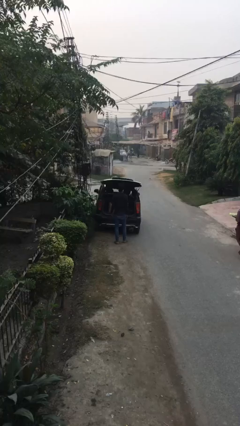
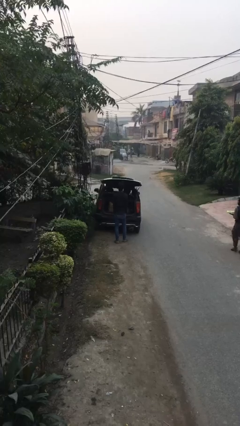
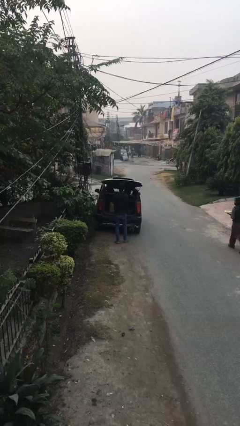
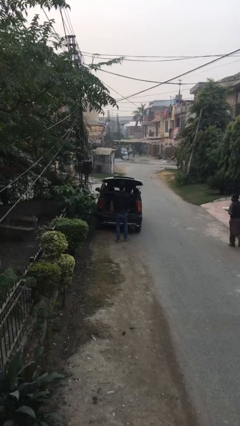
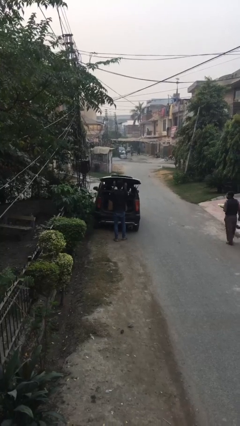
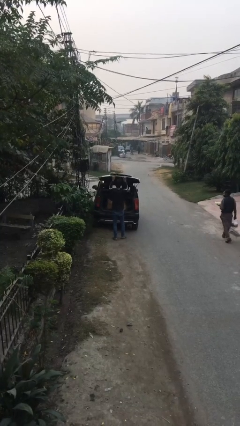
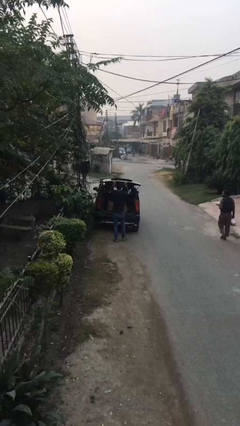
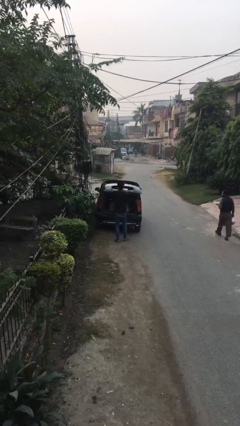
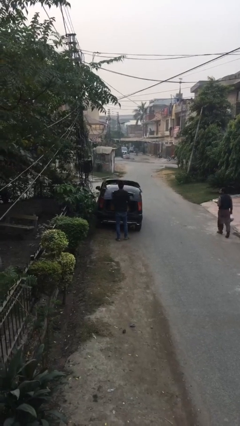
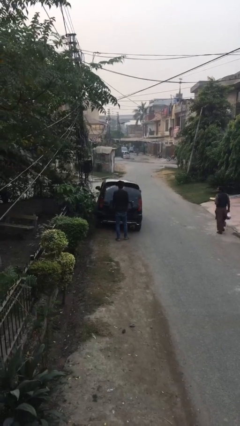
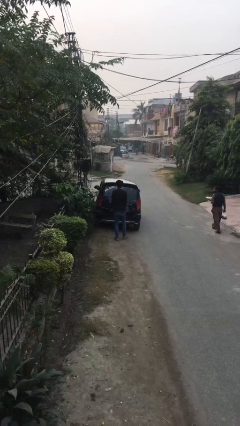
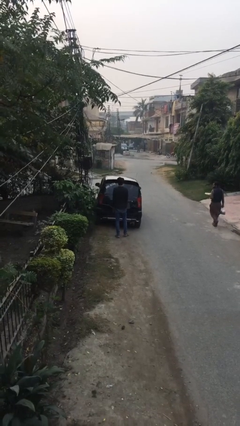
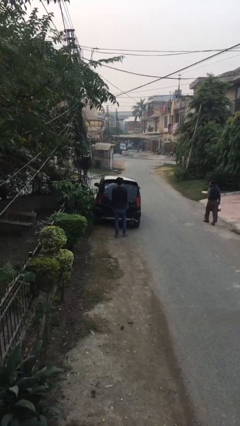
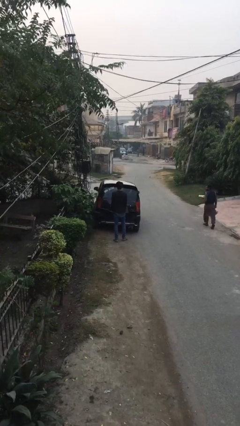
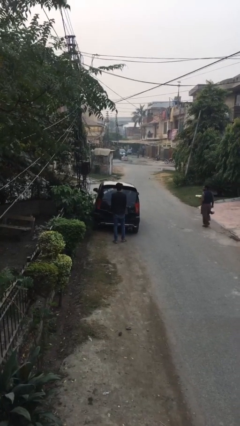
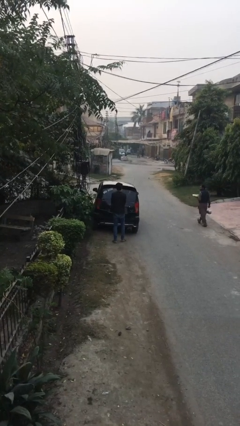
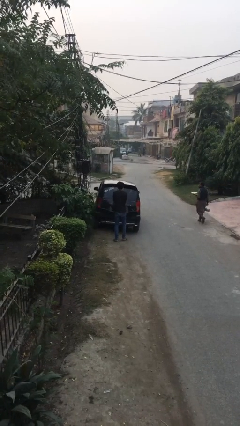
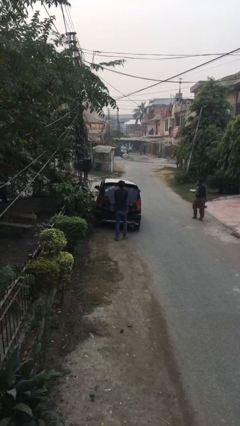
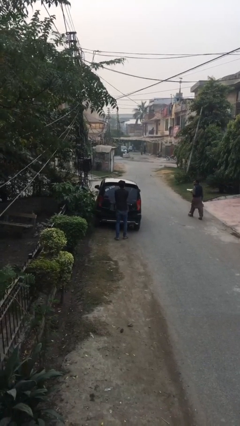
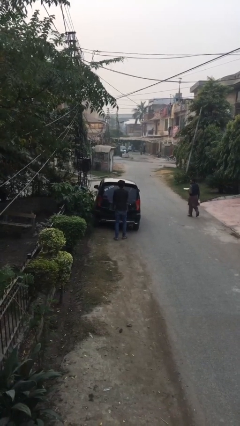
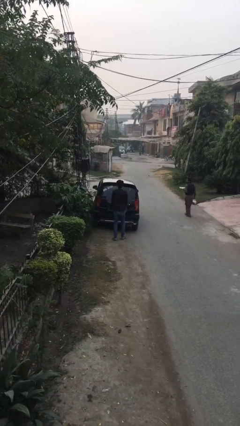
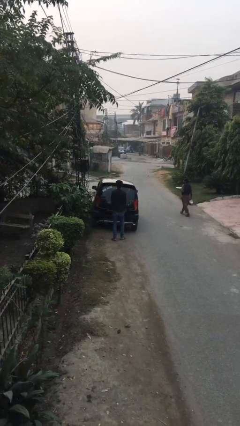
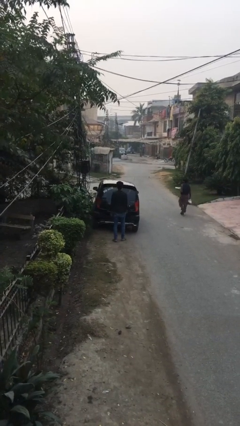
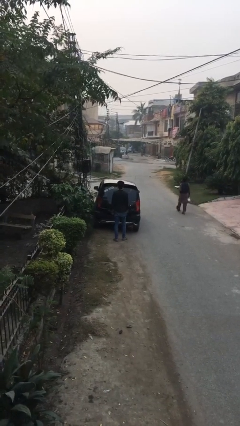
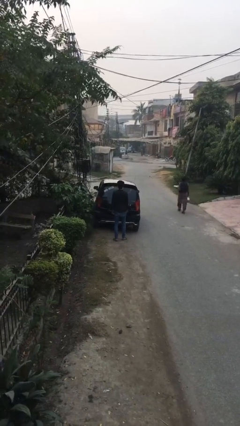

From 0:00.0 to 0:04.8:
person closes car trunk

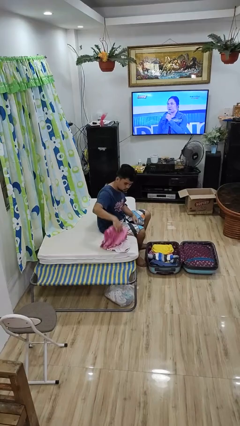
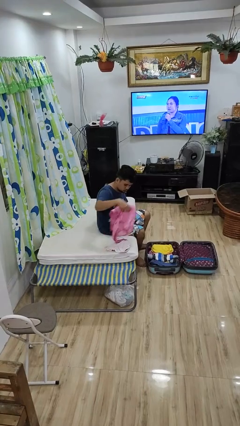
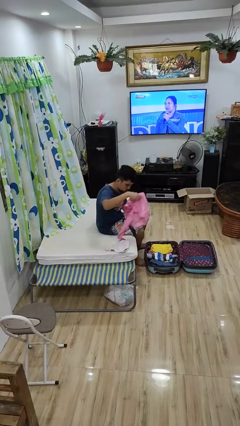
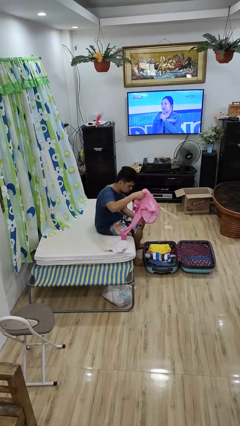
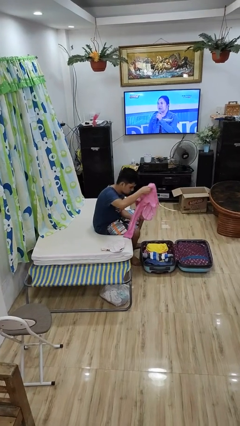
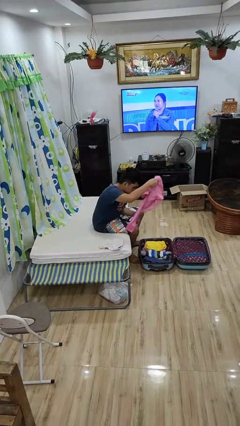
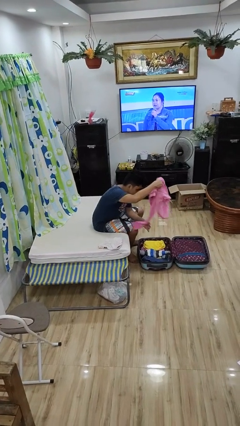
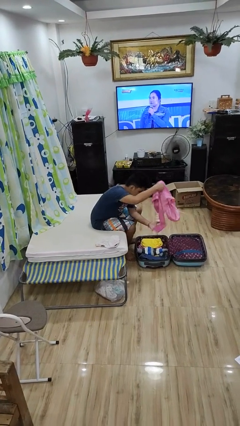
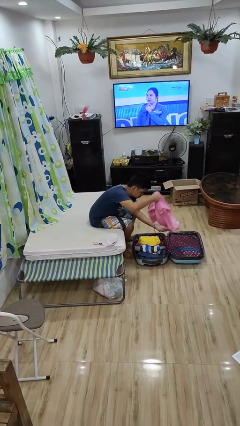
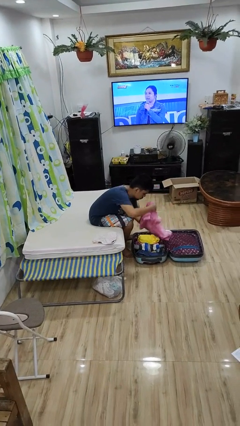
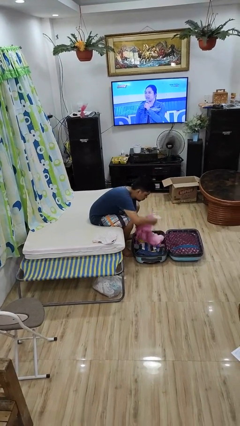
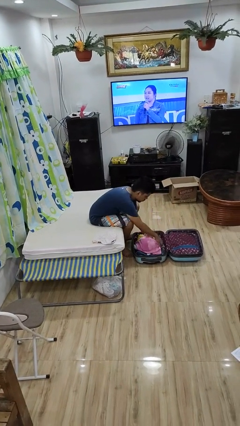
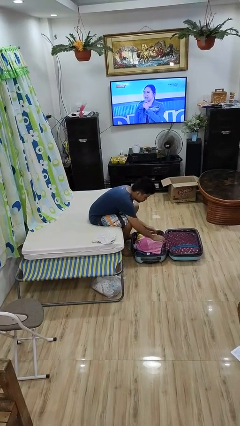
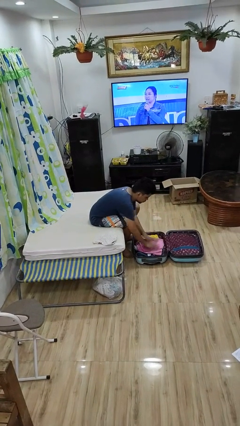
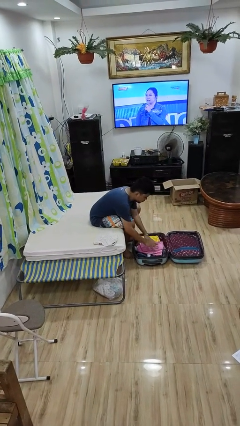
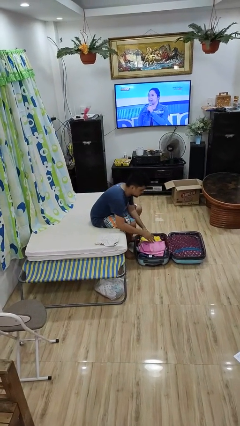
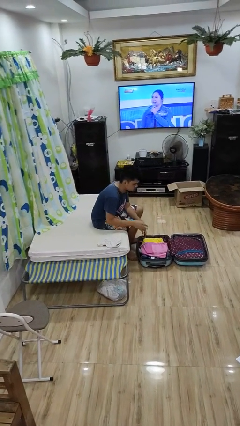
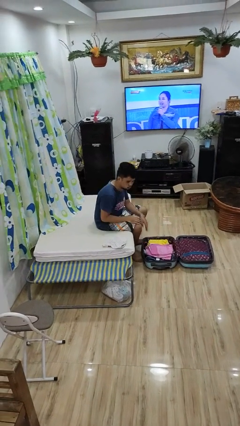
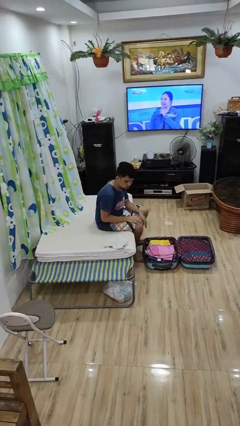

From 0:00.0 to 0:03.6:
person loads clothes into suitcase

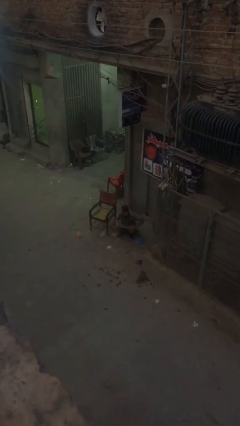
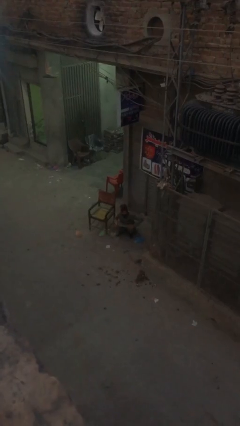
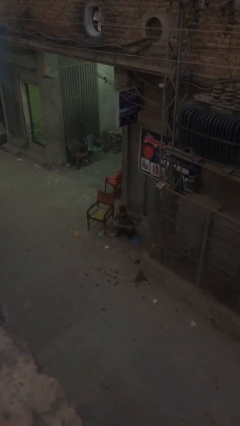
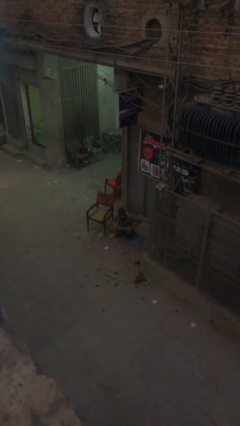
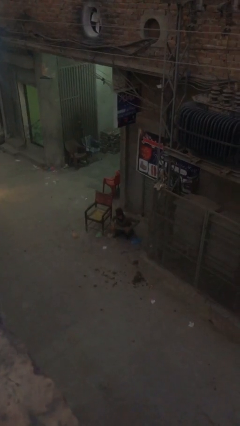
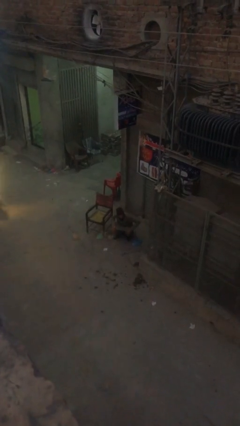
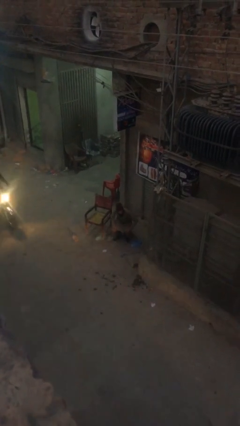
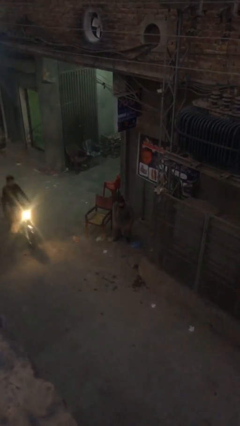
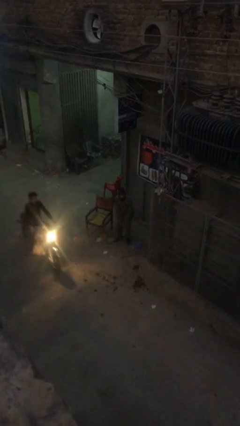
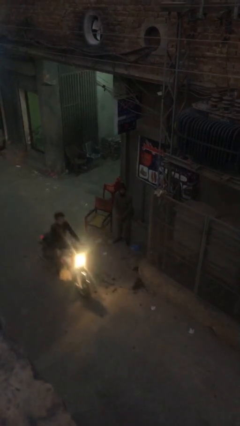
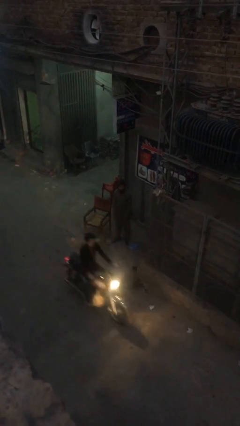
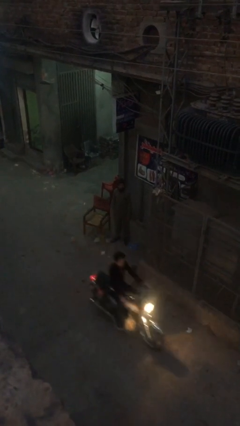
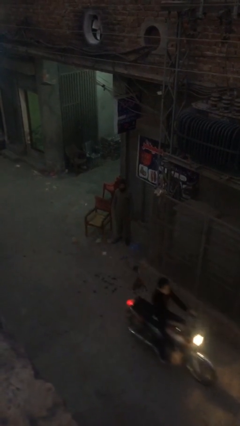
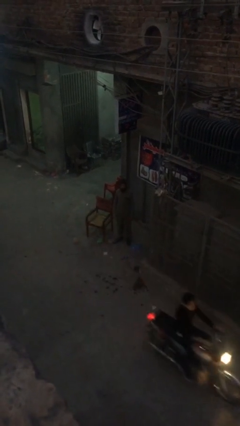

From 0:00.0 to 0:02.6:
person stands up

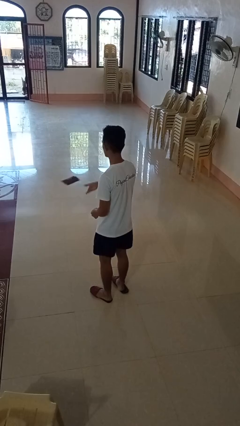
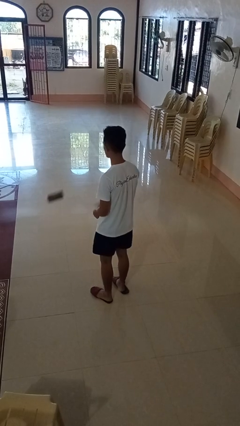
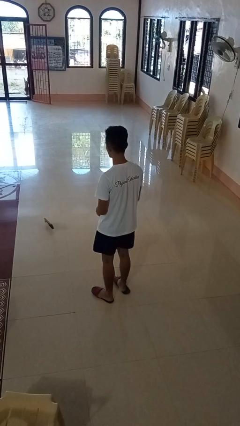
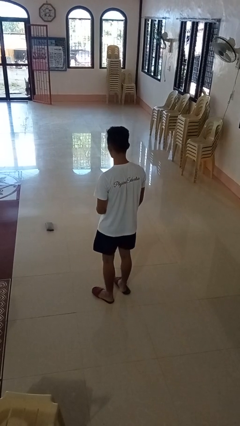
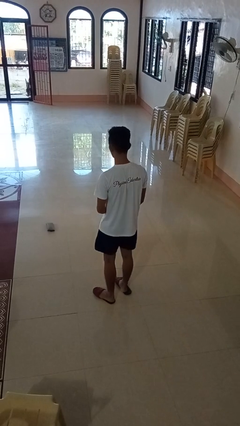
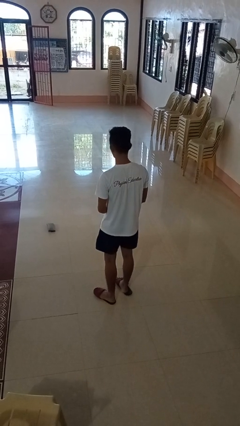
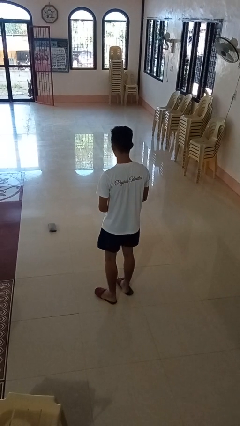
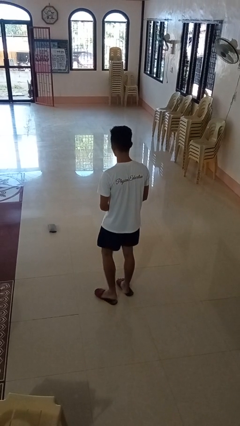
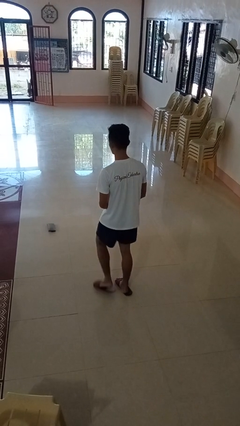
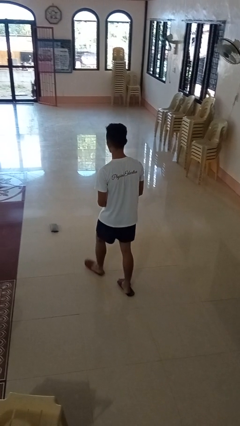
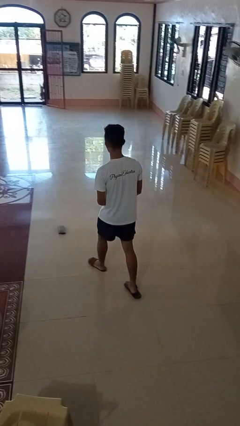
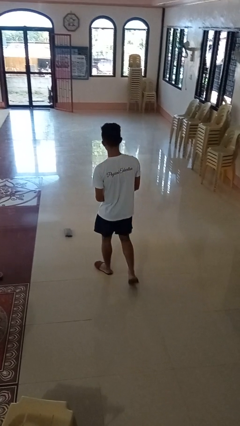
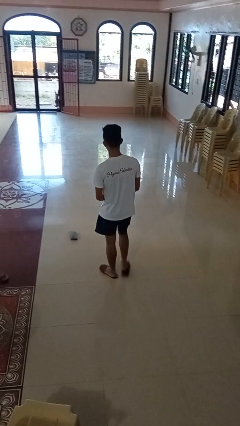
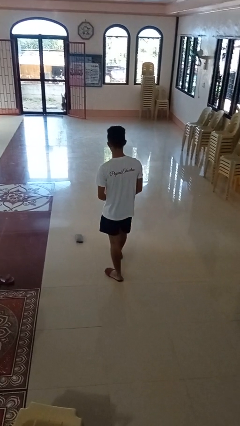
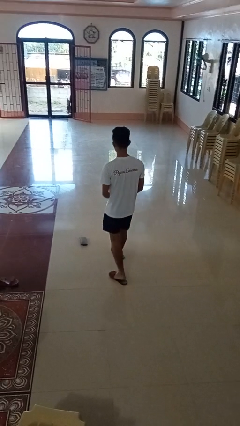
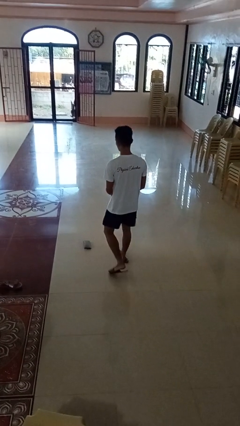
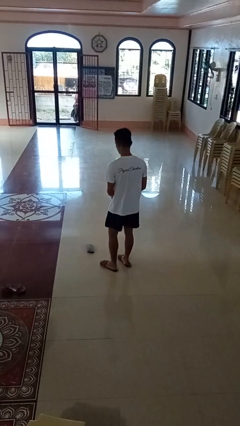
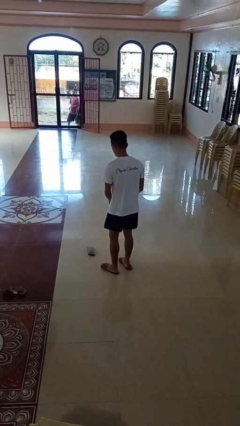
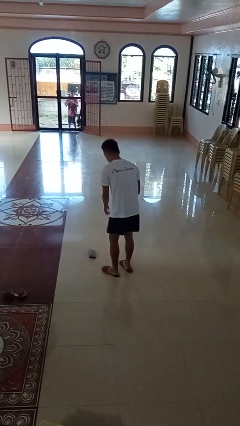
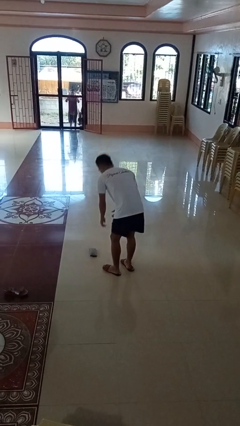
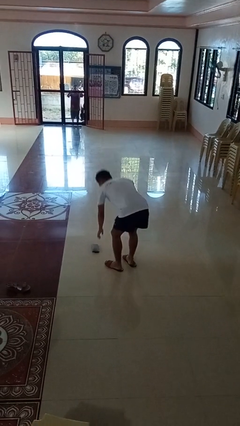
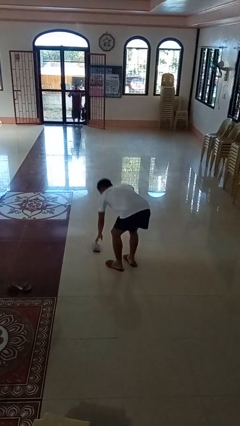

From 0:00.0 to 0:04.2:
person throws object to ground

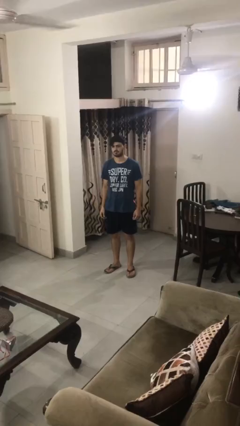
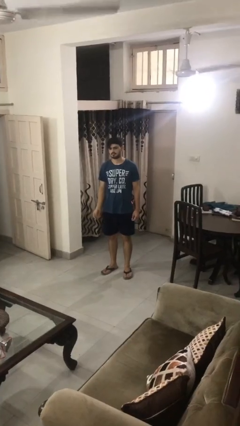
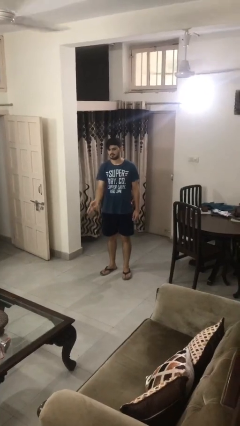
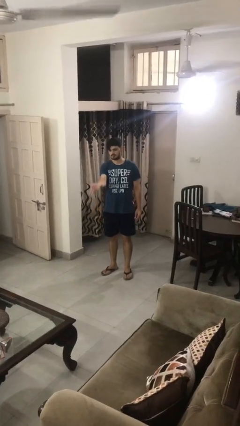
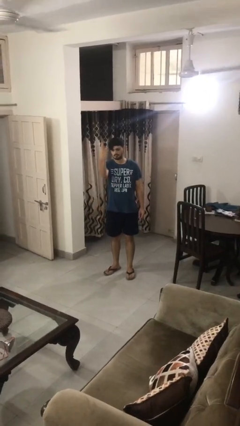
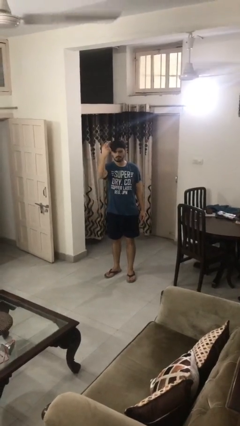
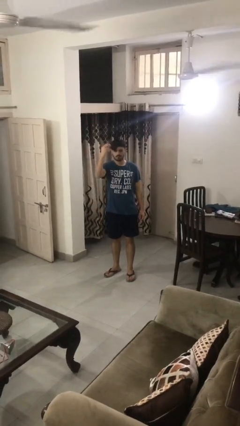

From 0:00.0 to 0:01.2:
person gestures swipe up

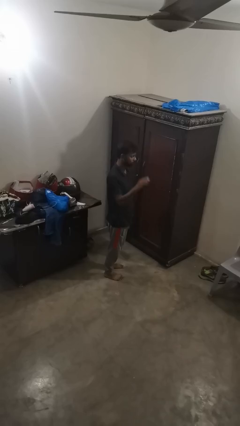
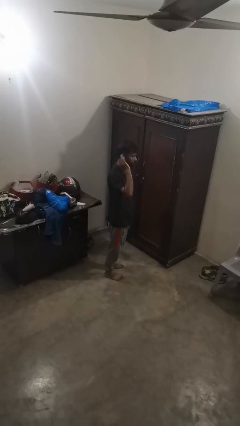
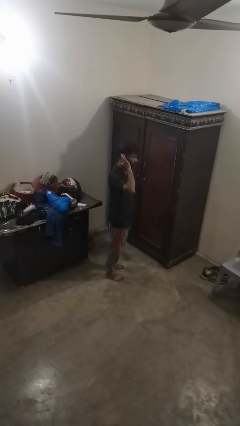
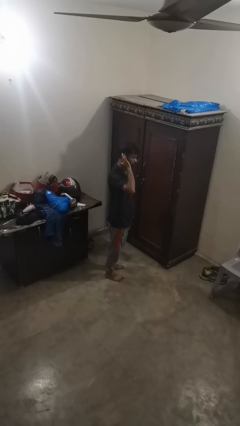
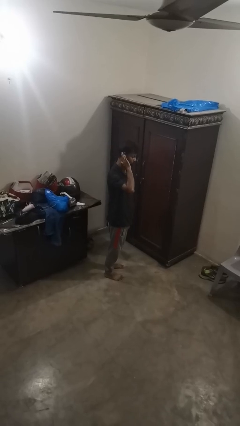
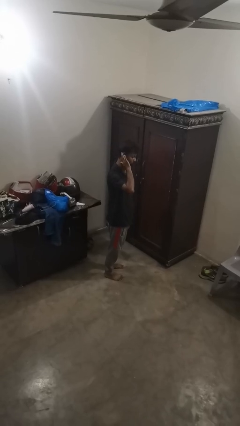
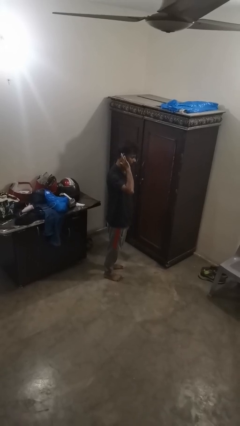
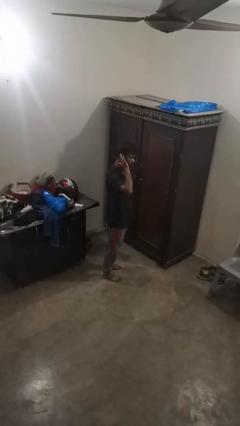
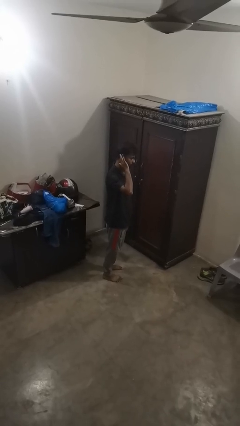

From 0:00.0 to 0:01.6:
person gestures listen closely
